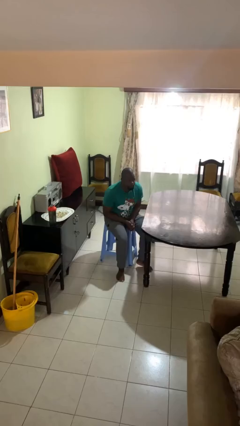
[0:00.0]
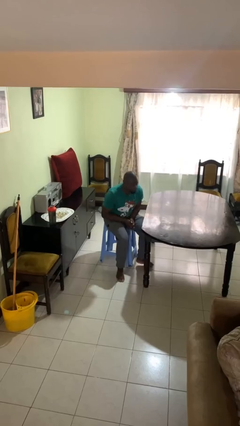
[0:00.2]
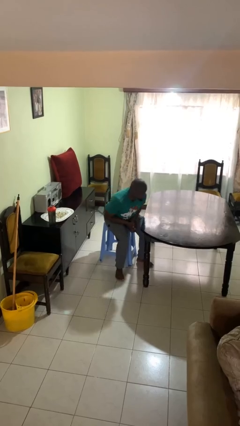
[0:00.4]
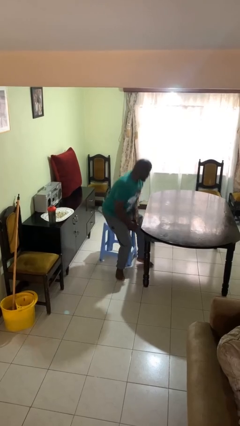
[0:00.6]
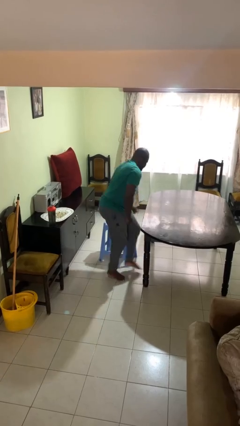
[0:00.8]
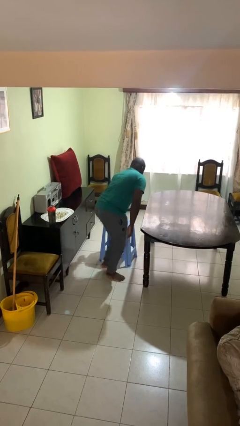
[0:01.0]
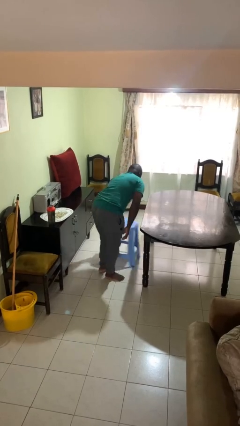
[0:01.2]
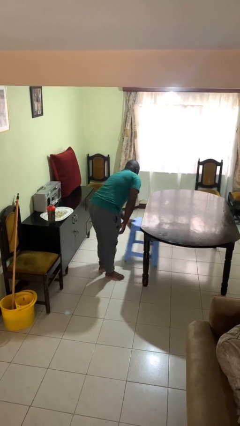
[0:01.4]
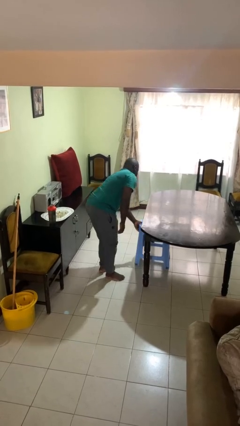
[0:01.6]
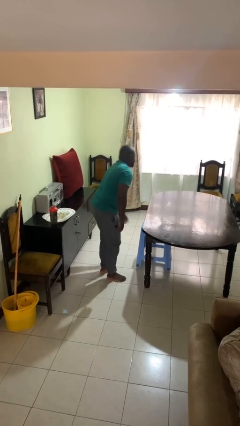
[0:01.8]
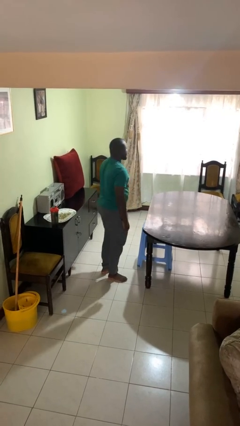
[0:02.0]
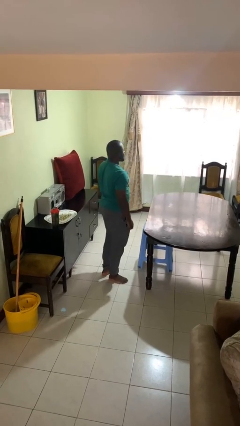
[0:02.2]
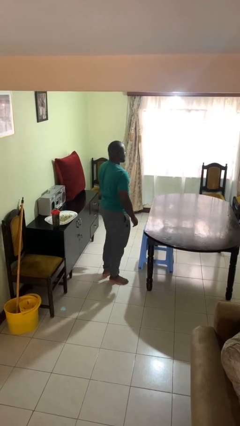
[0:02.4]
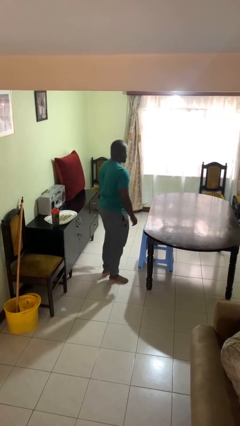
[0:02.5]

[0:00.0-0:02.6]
person stands up

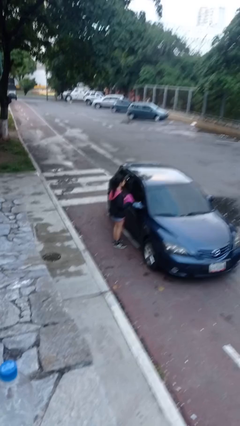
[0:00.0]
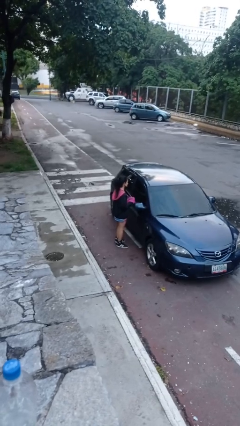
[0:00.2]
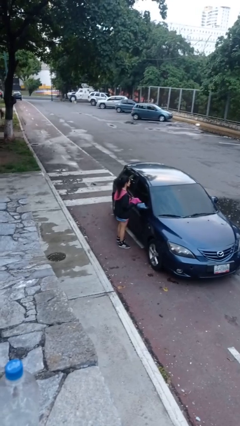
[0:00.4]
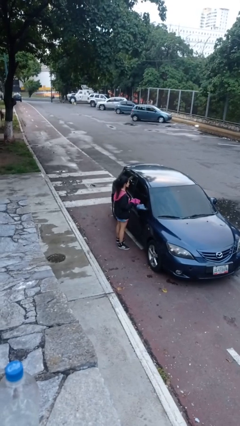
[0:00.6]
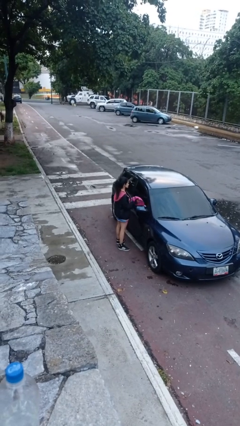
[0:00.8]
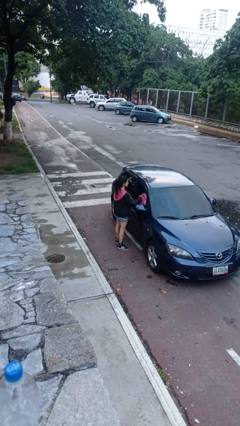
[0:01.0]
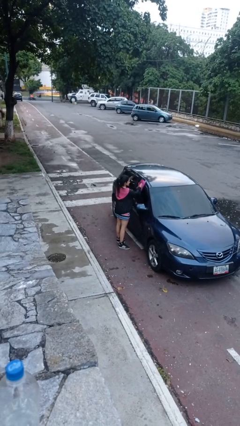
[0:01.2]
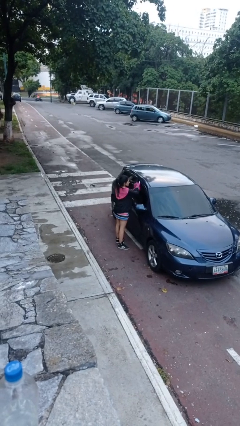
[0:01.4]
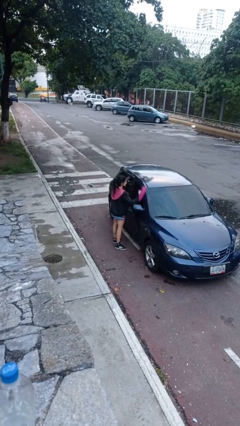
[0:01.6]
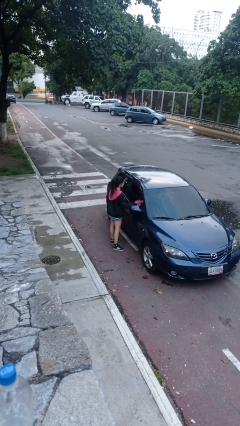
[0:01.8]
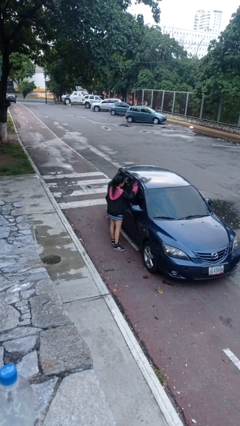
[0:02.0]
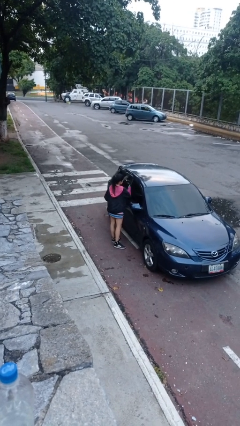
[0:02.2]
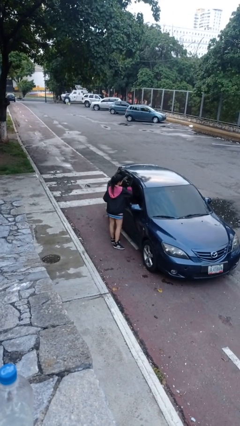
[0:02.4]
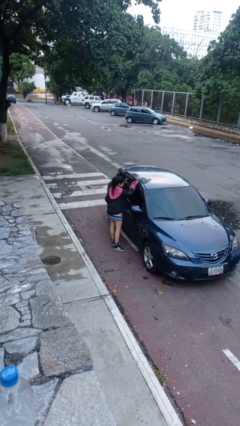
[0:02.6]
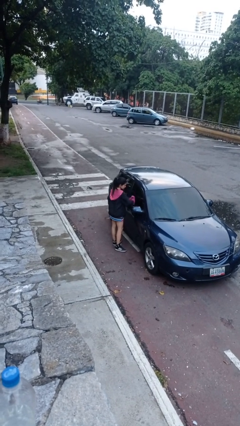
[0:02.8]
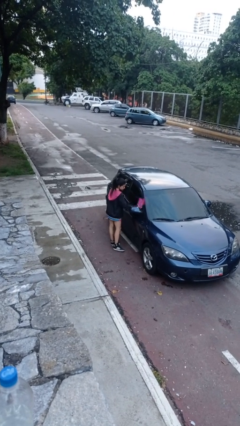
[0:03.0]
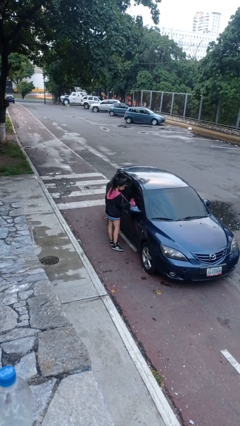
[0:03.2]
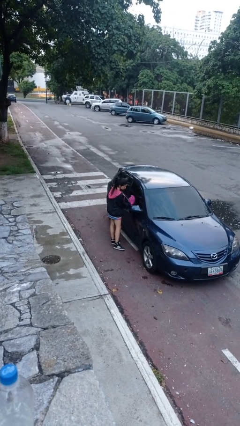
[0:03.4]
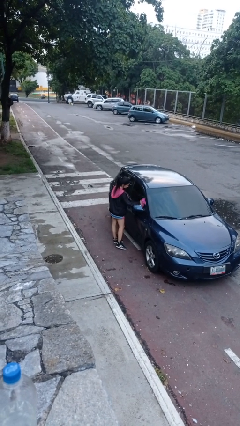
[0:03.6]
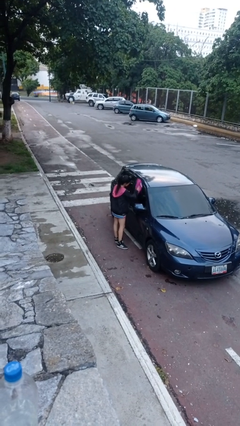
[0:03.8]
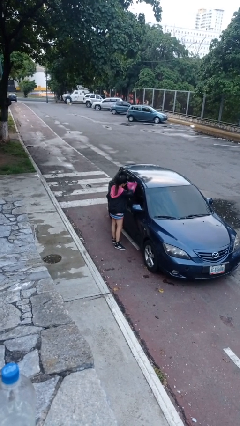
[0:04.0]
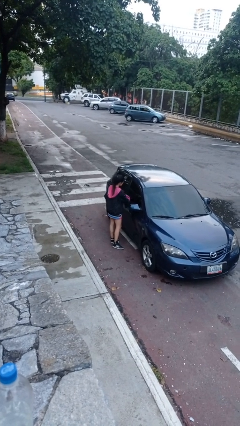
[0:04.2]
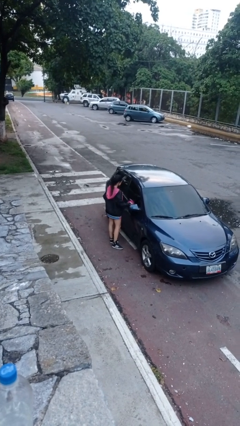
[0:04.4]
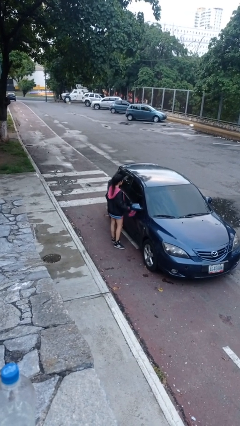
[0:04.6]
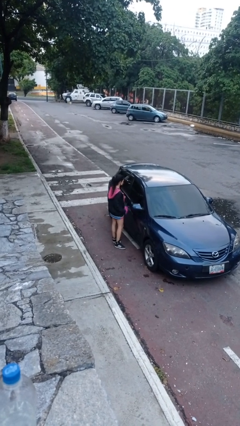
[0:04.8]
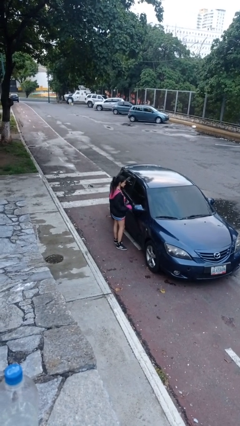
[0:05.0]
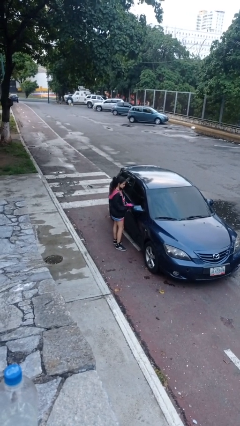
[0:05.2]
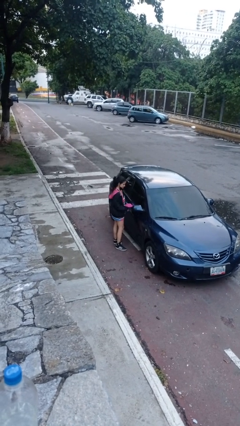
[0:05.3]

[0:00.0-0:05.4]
person polishes car with rag

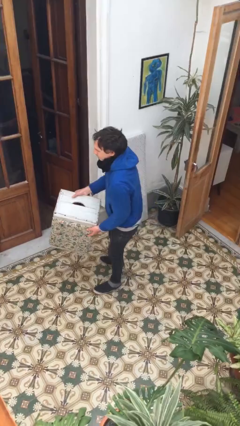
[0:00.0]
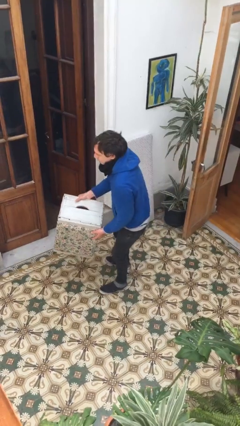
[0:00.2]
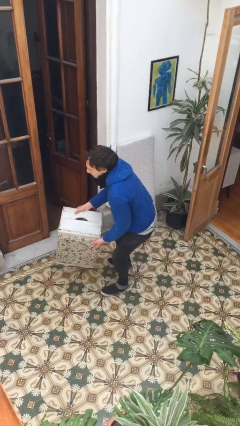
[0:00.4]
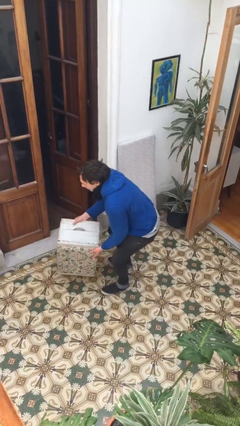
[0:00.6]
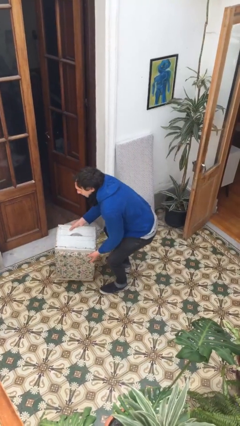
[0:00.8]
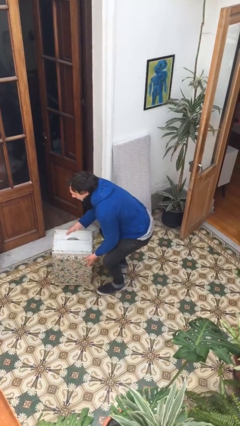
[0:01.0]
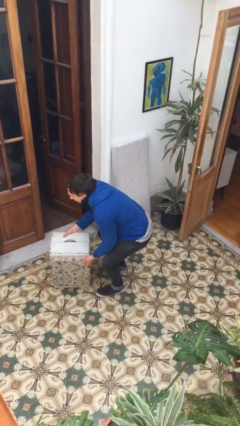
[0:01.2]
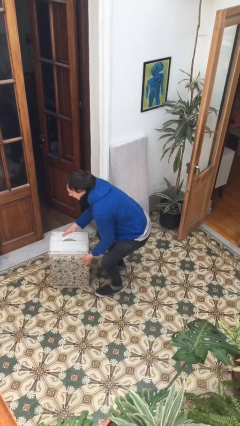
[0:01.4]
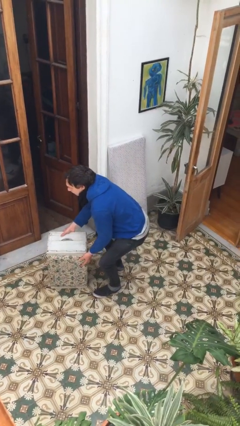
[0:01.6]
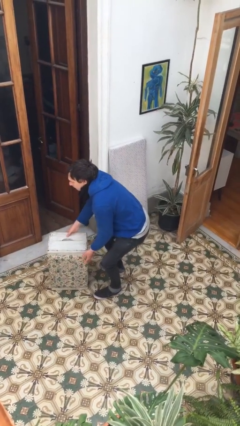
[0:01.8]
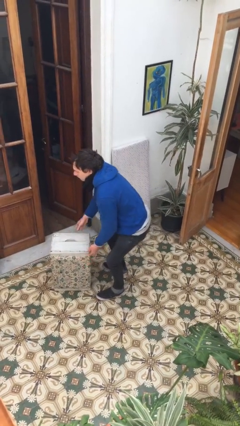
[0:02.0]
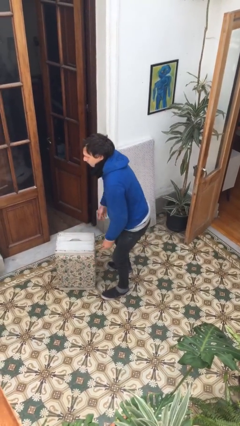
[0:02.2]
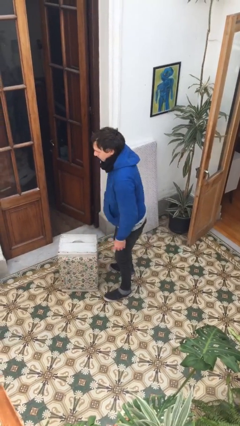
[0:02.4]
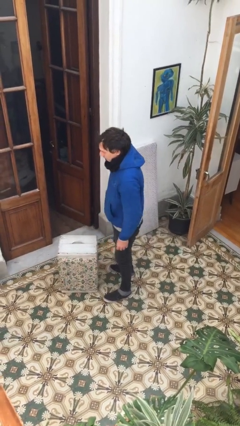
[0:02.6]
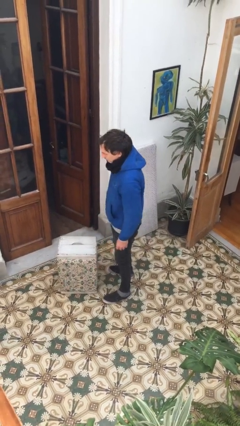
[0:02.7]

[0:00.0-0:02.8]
person puts down object on floor

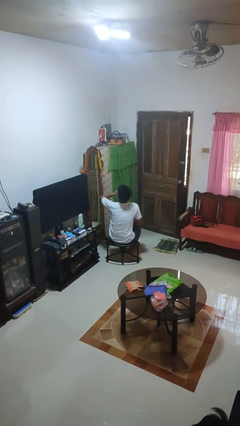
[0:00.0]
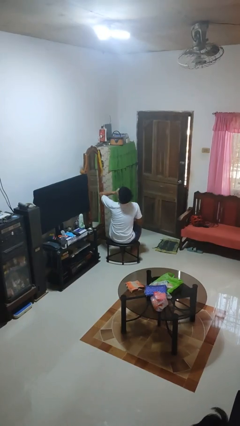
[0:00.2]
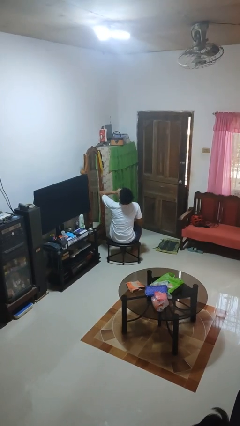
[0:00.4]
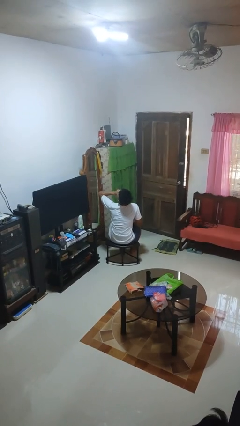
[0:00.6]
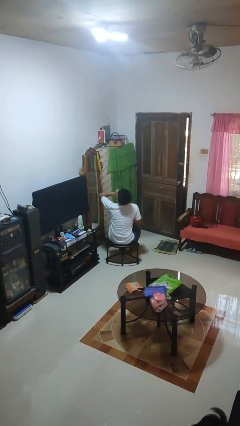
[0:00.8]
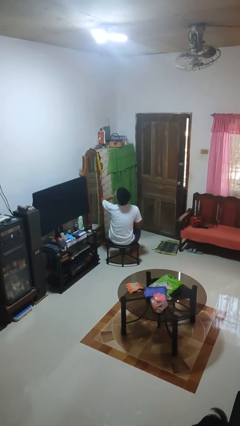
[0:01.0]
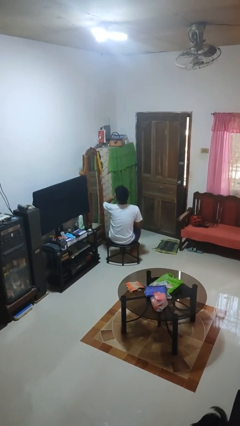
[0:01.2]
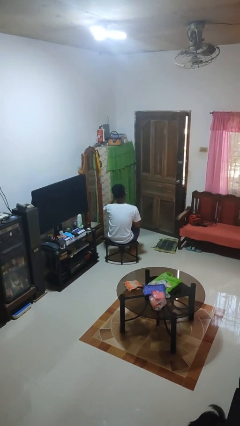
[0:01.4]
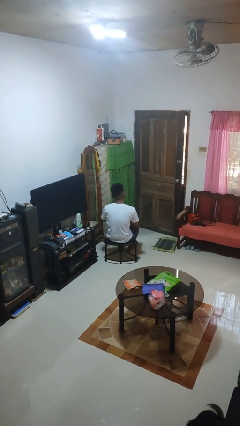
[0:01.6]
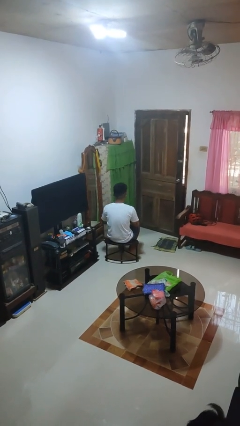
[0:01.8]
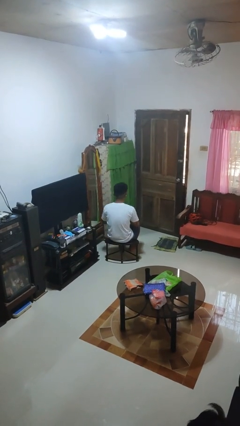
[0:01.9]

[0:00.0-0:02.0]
person yawns

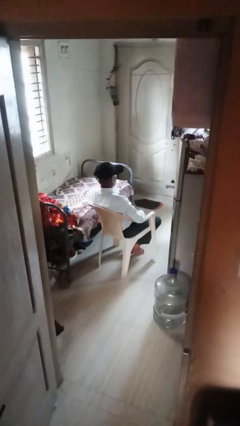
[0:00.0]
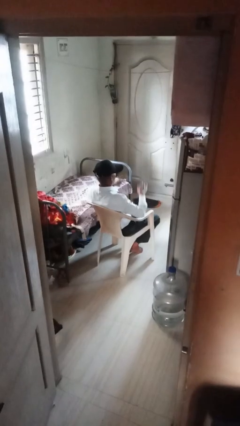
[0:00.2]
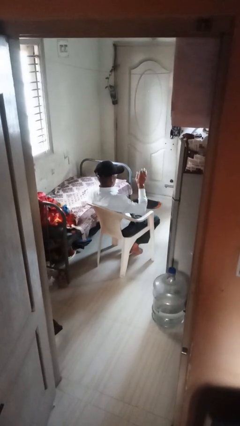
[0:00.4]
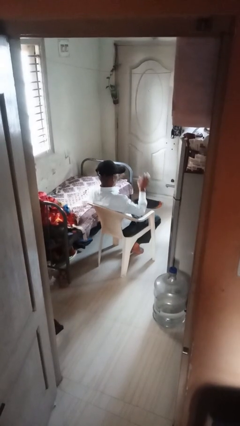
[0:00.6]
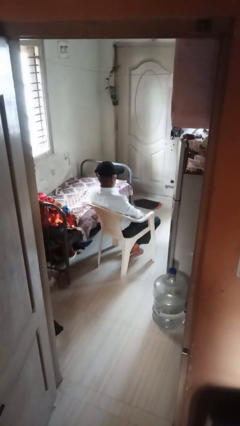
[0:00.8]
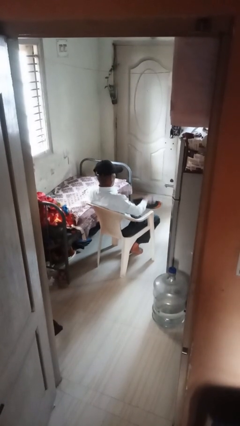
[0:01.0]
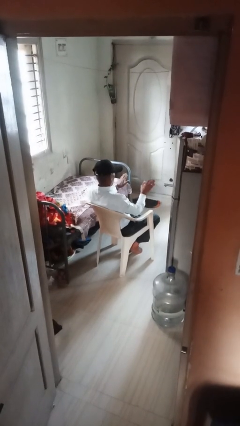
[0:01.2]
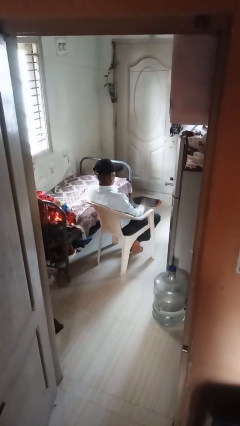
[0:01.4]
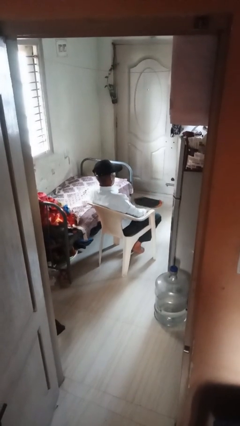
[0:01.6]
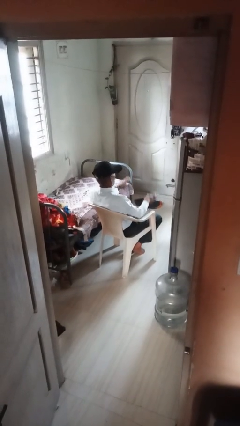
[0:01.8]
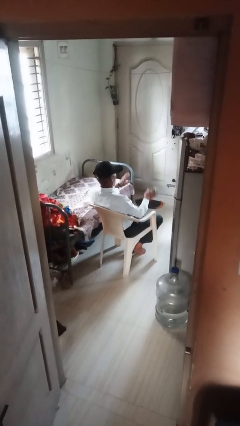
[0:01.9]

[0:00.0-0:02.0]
person slaps hands on thighs

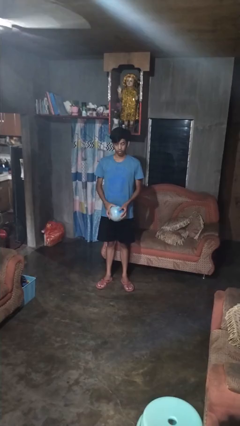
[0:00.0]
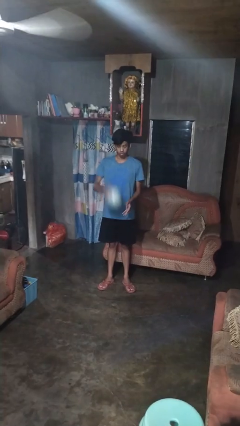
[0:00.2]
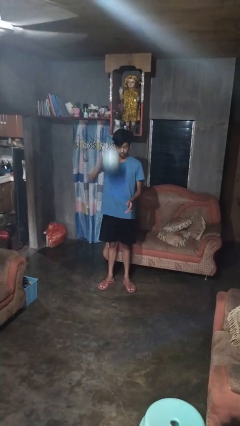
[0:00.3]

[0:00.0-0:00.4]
person bounces ball on floor

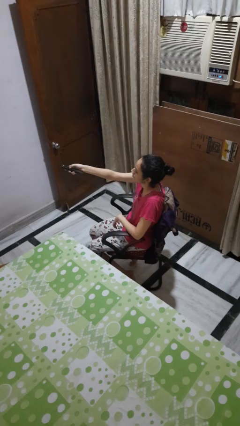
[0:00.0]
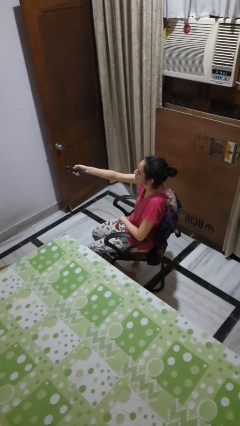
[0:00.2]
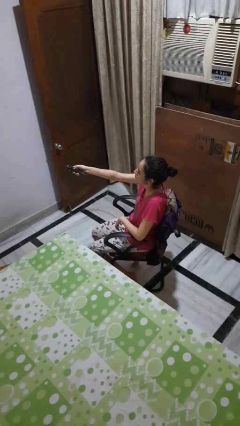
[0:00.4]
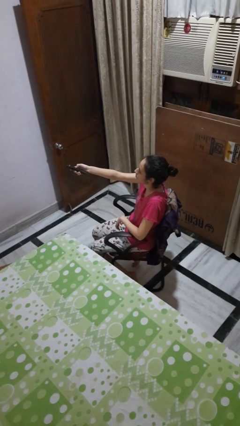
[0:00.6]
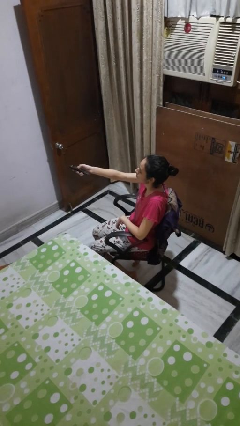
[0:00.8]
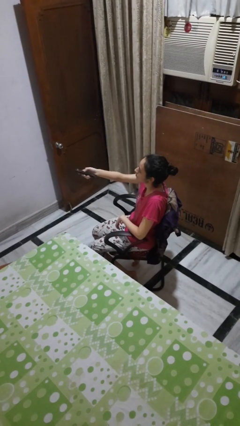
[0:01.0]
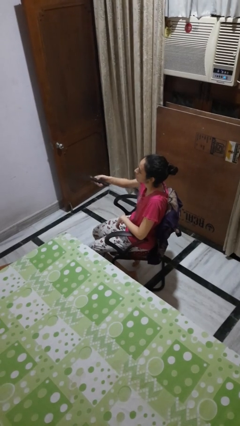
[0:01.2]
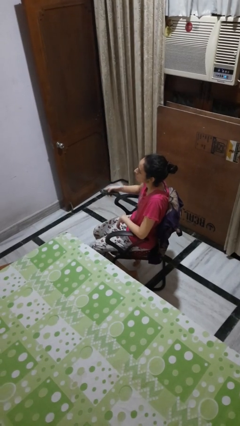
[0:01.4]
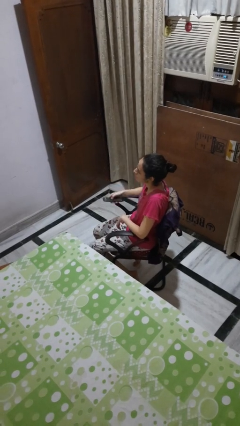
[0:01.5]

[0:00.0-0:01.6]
person uses television remote

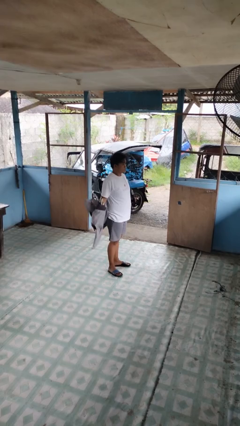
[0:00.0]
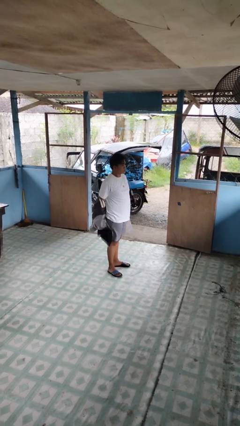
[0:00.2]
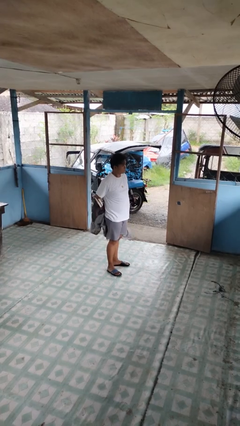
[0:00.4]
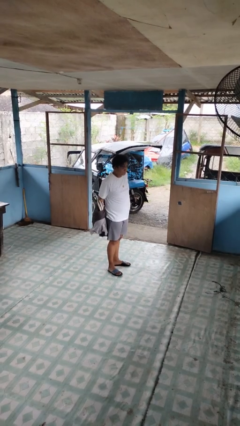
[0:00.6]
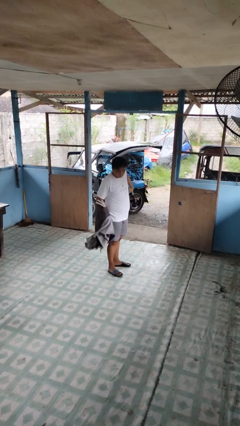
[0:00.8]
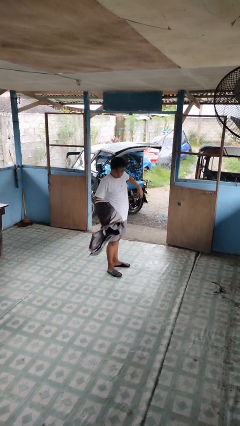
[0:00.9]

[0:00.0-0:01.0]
person takes off jacket
